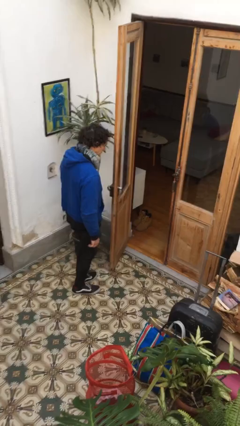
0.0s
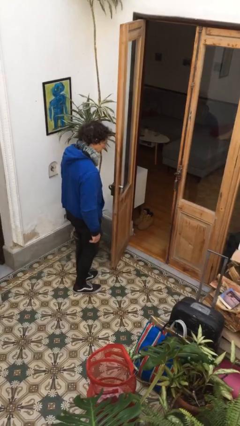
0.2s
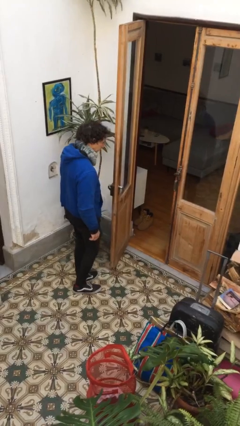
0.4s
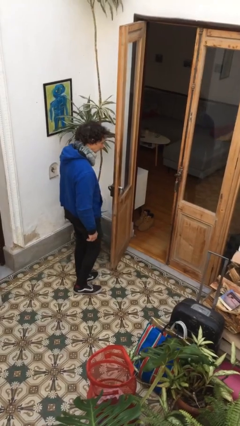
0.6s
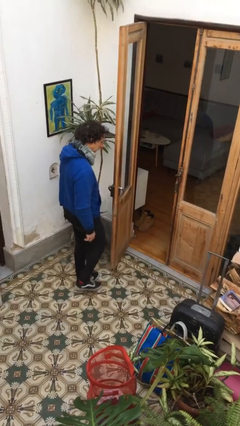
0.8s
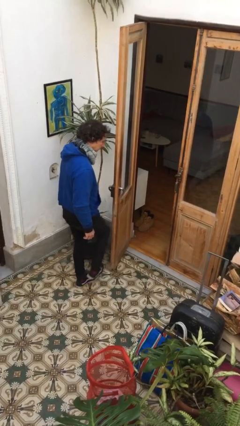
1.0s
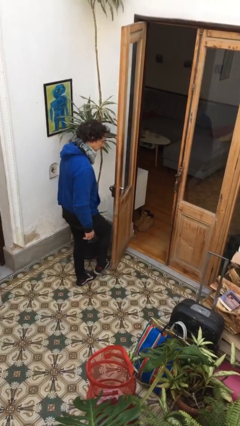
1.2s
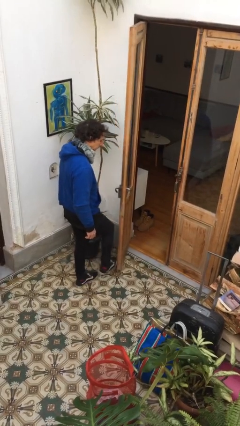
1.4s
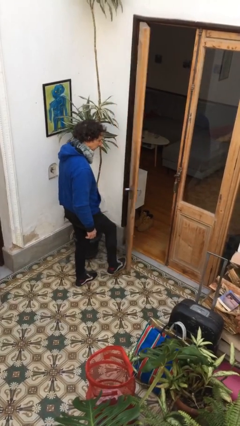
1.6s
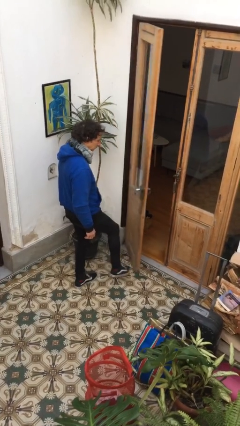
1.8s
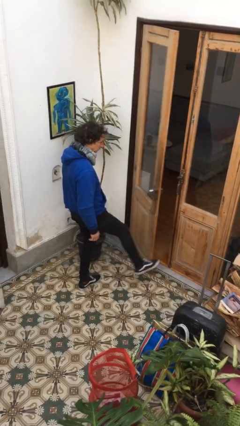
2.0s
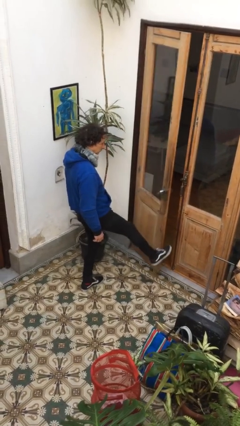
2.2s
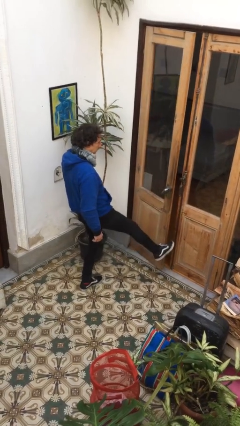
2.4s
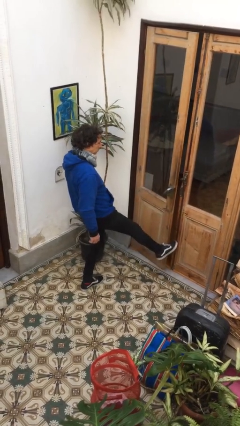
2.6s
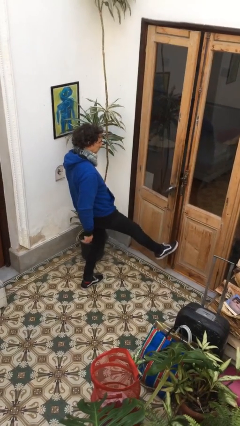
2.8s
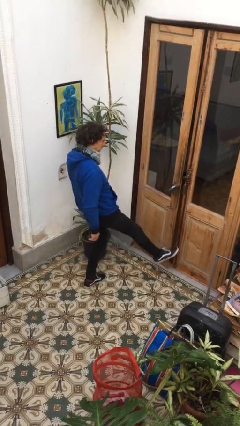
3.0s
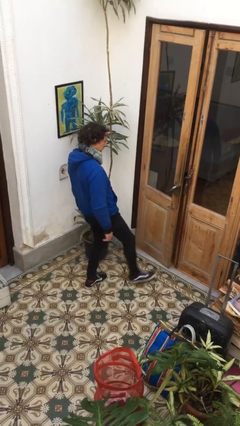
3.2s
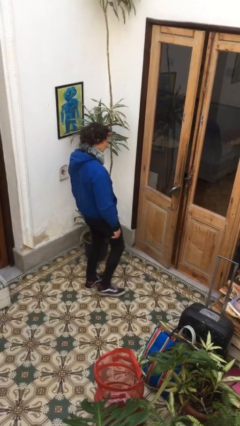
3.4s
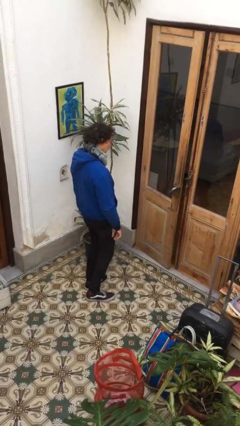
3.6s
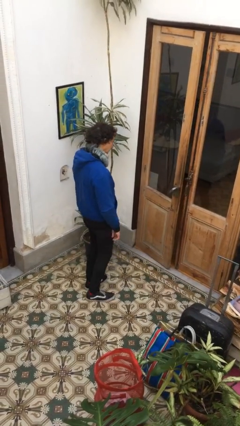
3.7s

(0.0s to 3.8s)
person closes door with foot

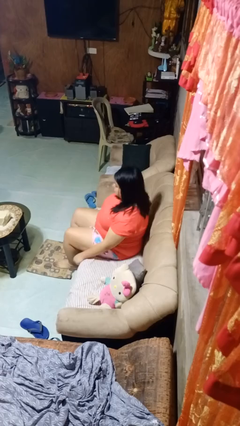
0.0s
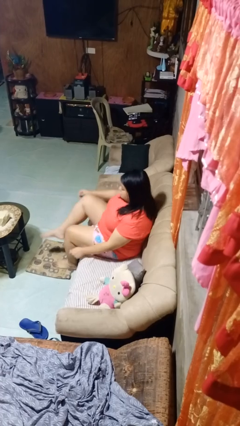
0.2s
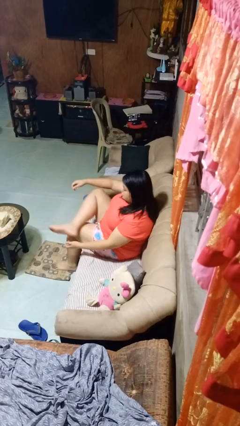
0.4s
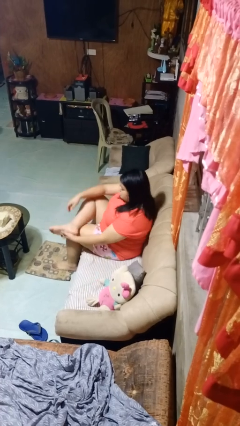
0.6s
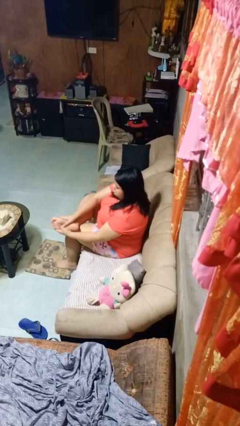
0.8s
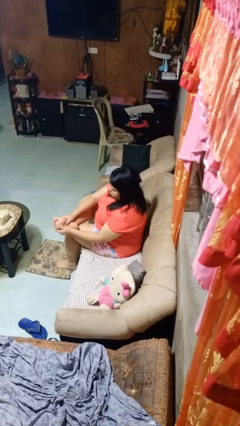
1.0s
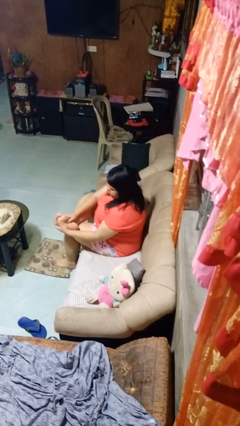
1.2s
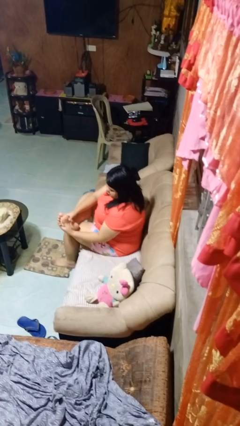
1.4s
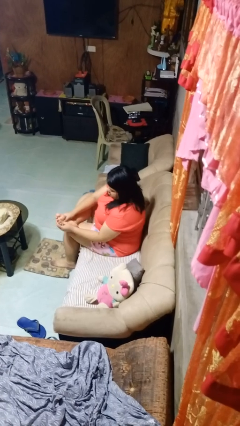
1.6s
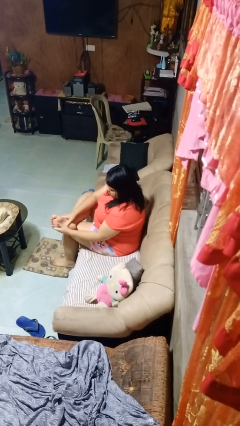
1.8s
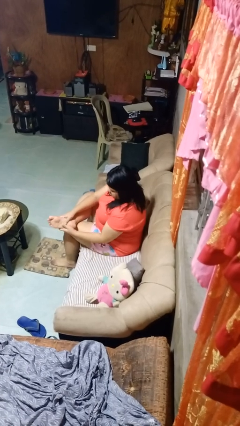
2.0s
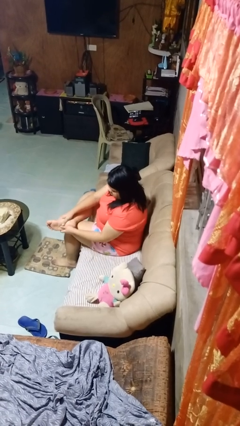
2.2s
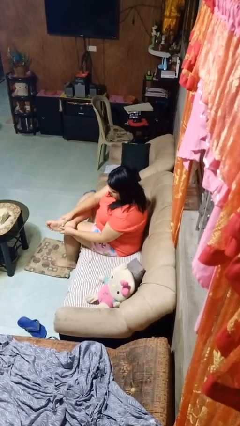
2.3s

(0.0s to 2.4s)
person rubs foot

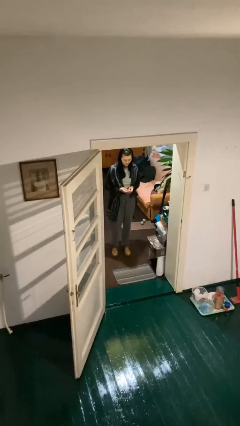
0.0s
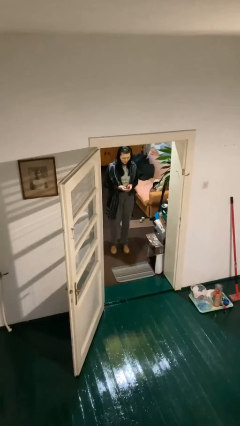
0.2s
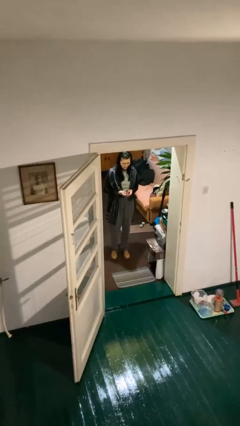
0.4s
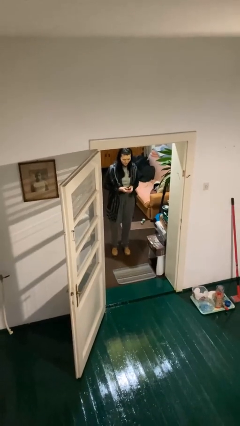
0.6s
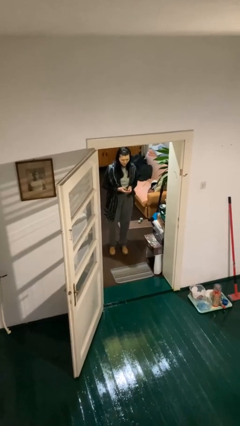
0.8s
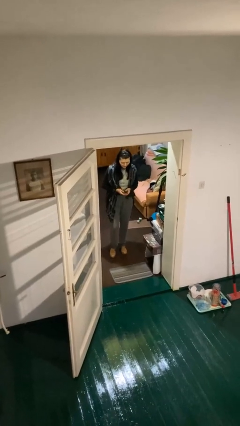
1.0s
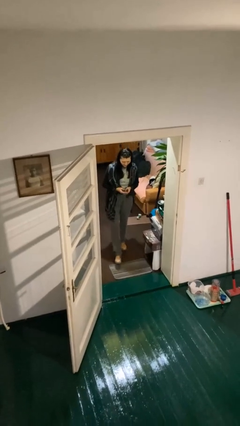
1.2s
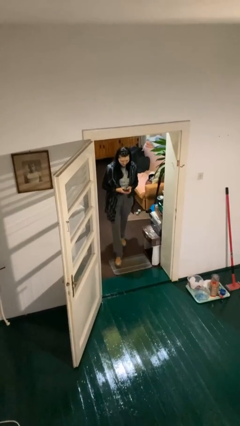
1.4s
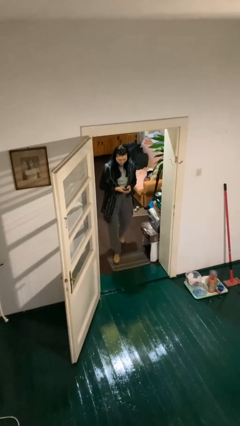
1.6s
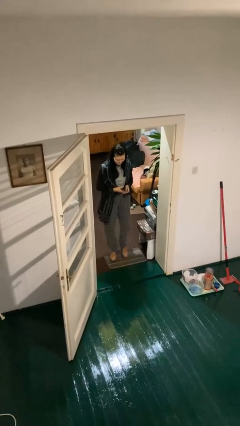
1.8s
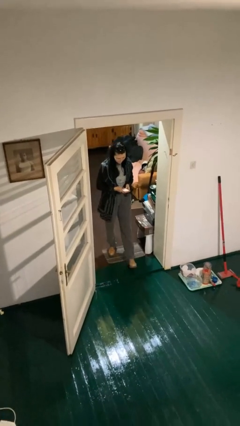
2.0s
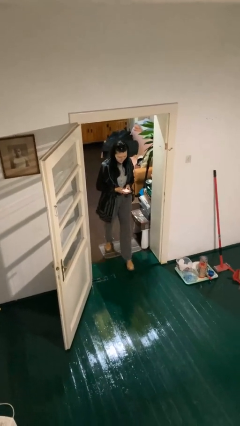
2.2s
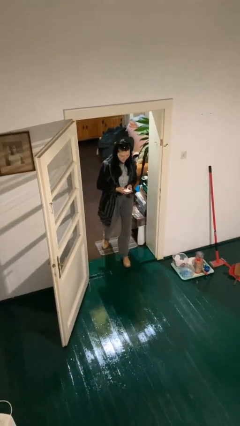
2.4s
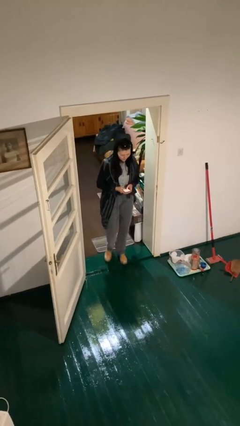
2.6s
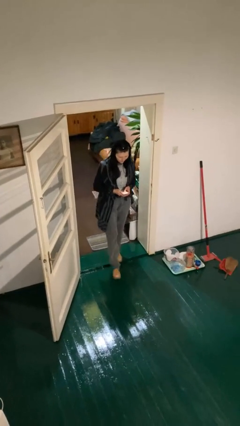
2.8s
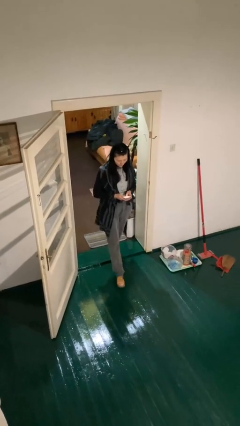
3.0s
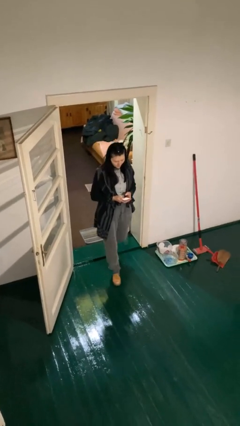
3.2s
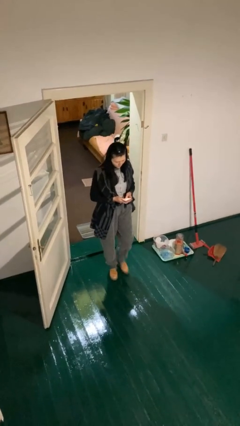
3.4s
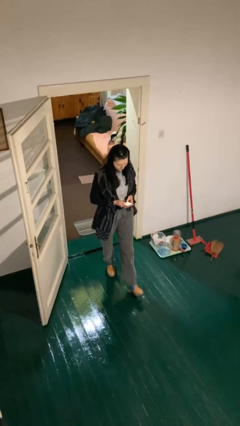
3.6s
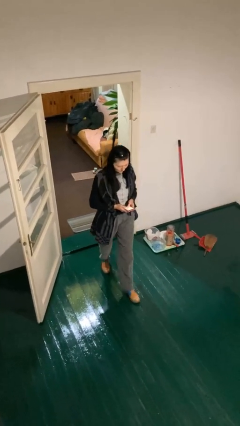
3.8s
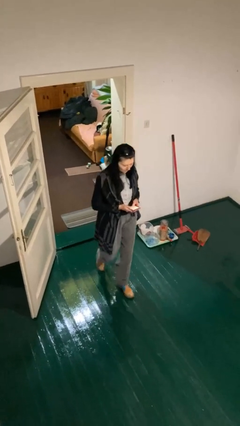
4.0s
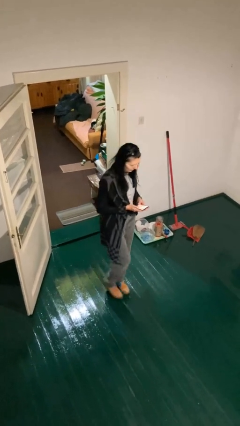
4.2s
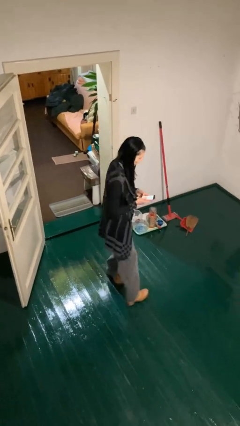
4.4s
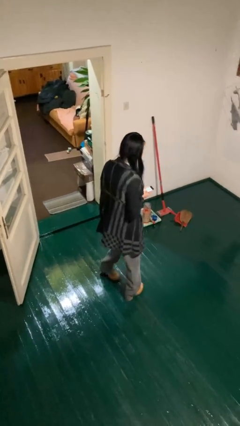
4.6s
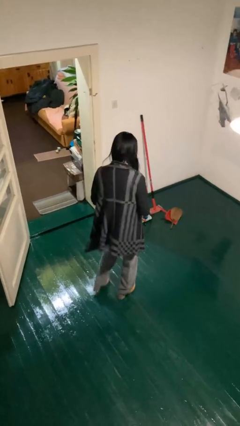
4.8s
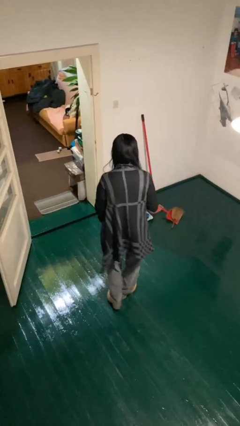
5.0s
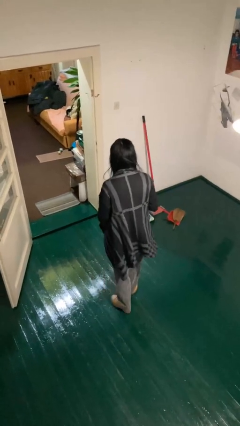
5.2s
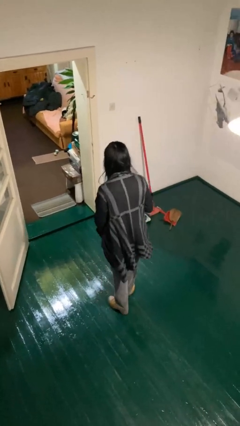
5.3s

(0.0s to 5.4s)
person enters scene through structure

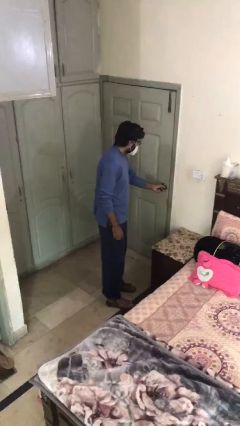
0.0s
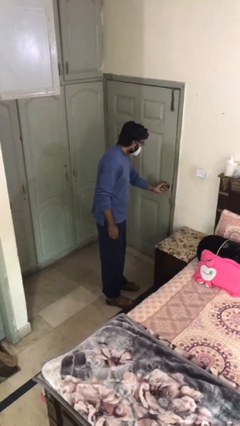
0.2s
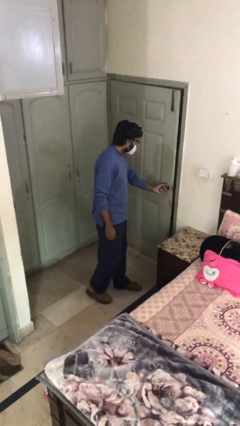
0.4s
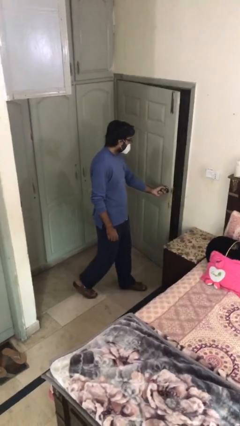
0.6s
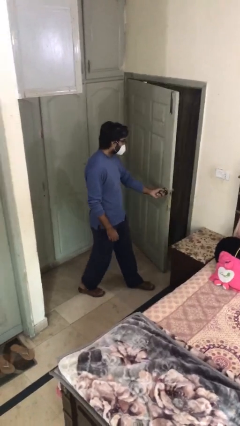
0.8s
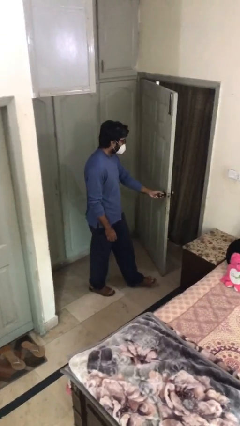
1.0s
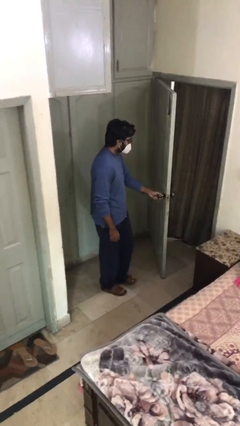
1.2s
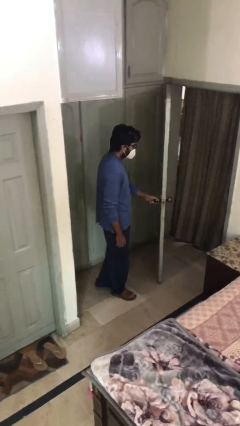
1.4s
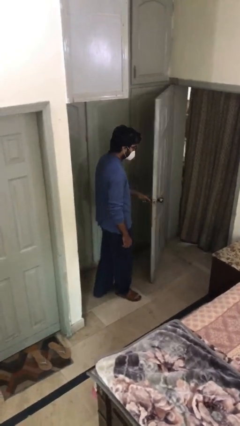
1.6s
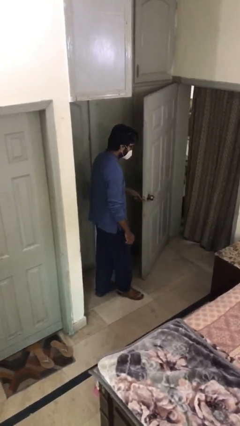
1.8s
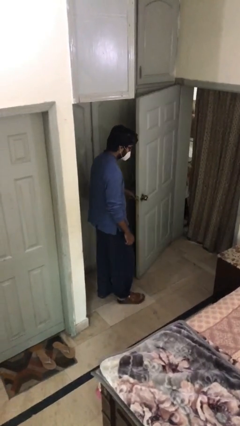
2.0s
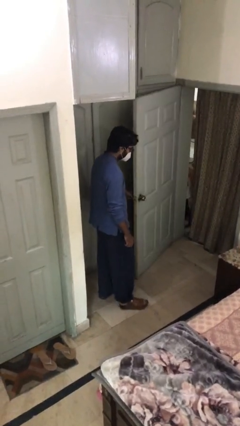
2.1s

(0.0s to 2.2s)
person opens facility door

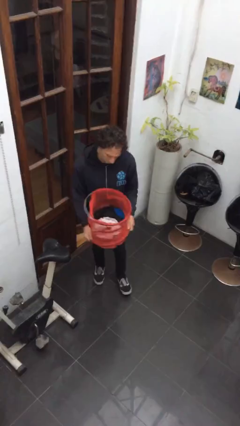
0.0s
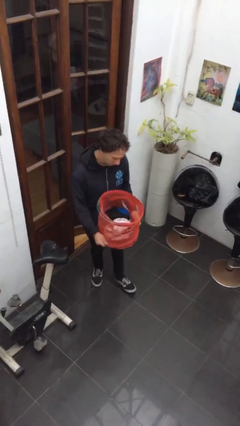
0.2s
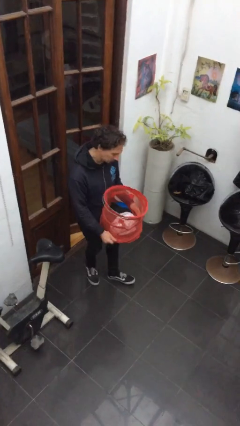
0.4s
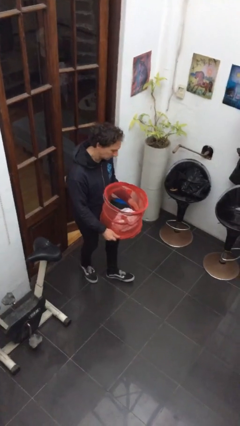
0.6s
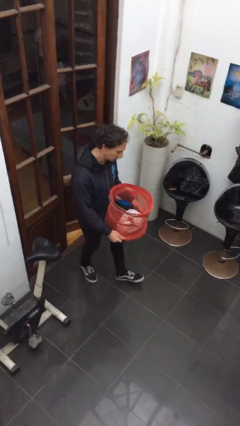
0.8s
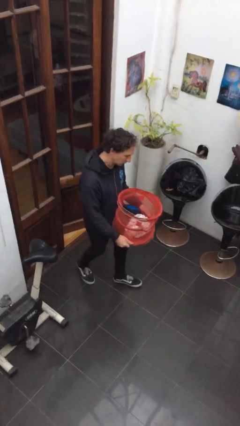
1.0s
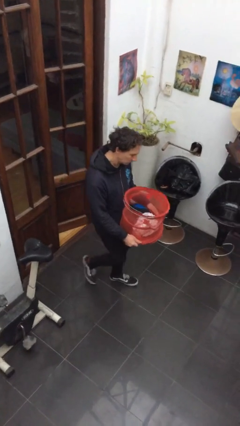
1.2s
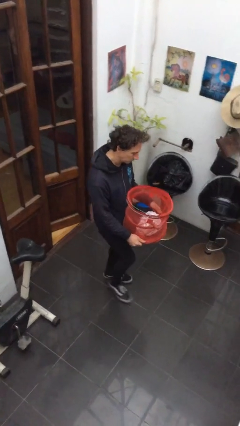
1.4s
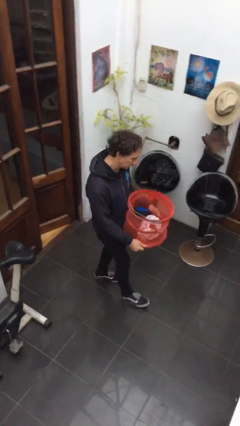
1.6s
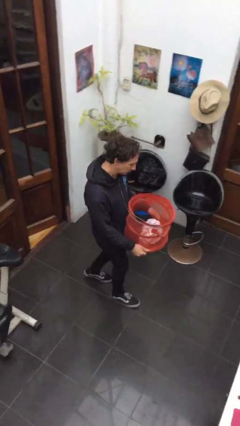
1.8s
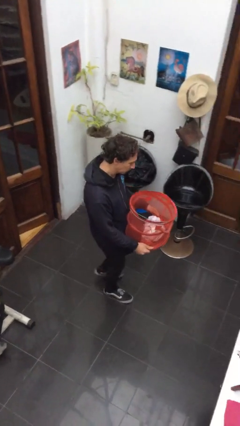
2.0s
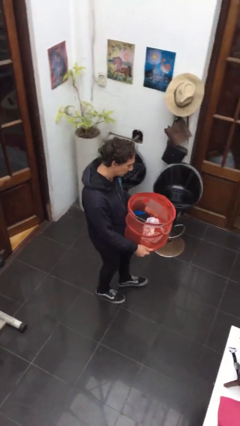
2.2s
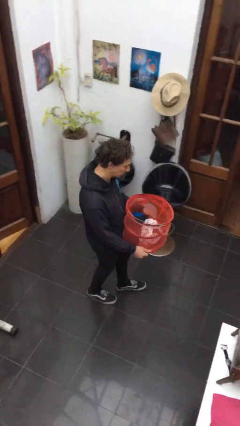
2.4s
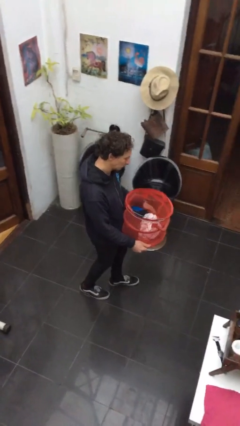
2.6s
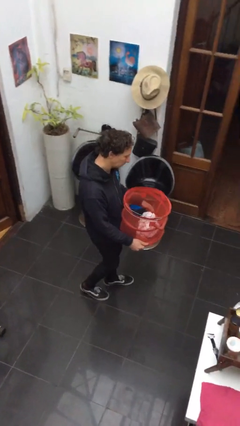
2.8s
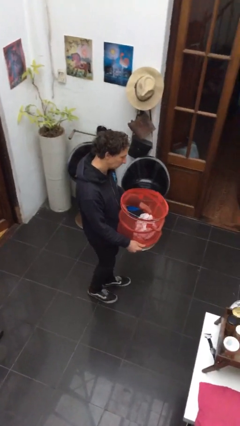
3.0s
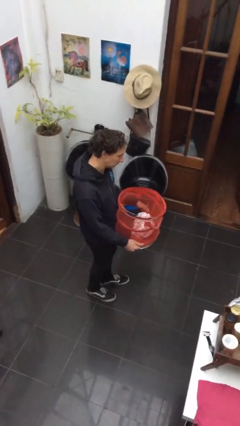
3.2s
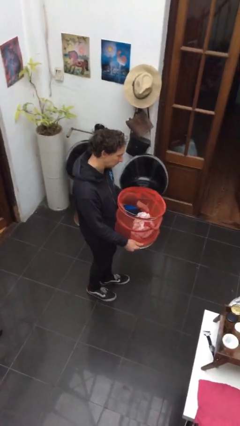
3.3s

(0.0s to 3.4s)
person carries laundry basket

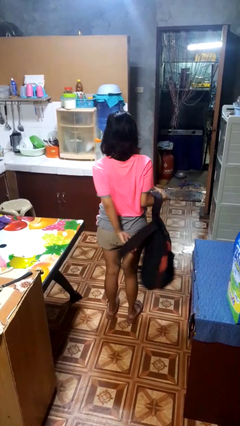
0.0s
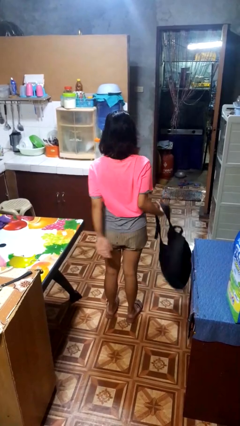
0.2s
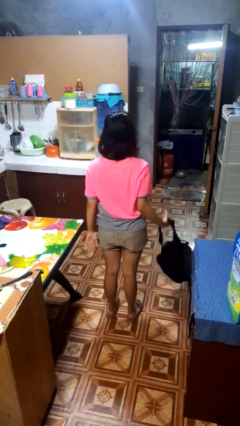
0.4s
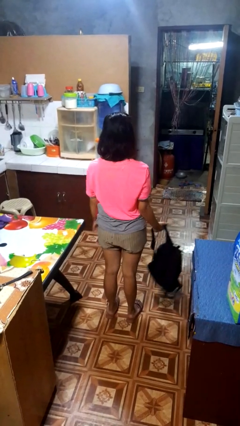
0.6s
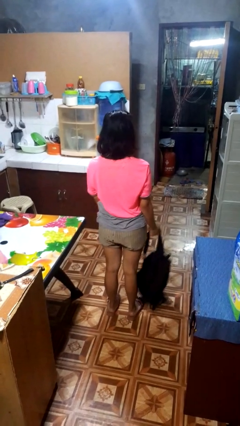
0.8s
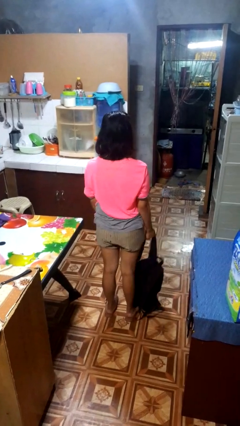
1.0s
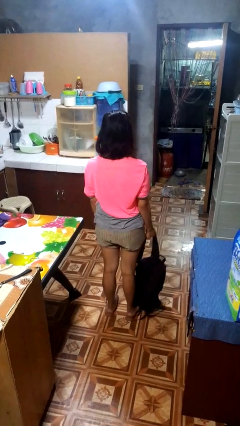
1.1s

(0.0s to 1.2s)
person takes off backpack
